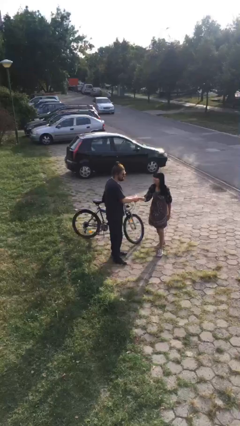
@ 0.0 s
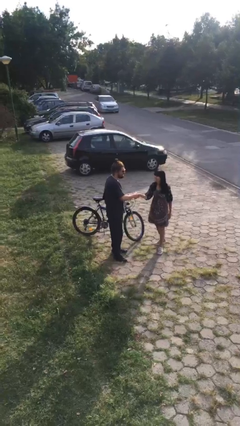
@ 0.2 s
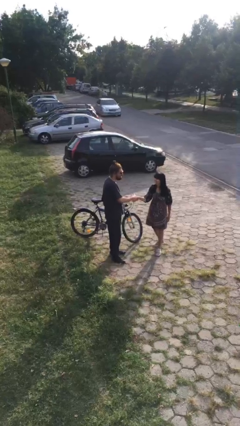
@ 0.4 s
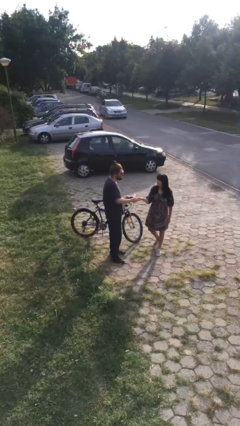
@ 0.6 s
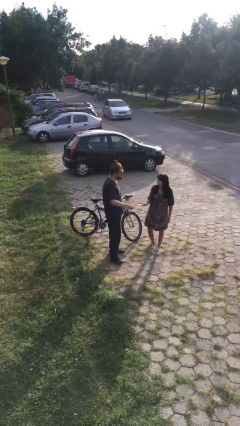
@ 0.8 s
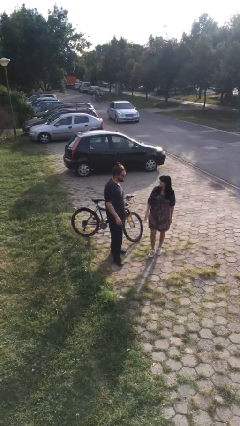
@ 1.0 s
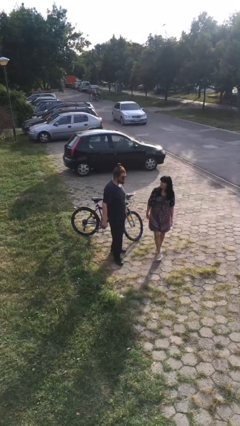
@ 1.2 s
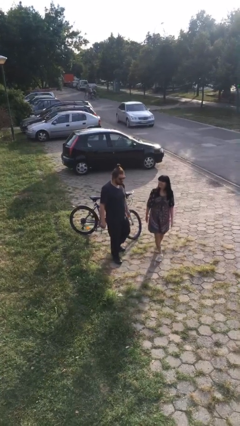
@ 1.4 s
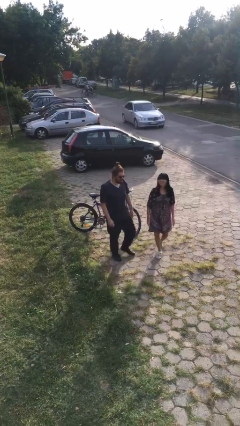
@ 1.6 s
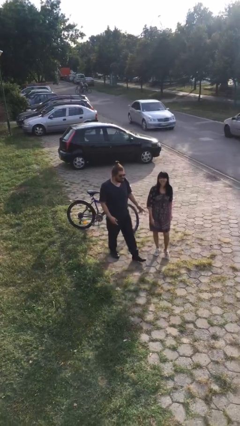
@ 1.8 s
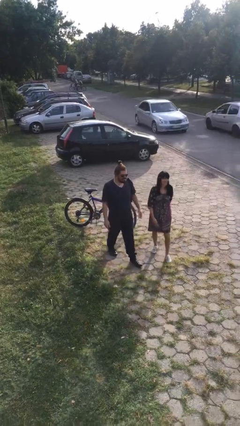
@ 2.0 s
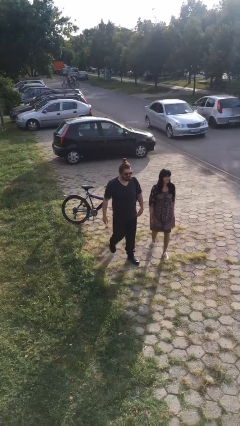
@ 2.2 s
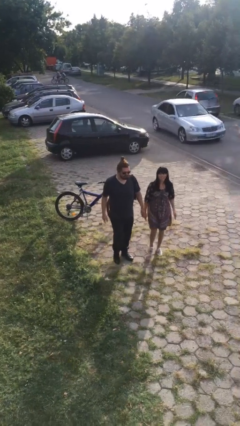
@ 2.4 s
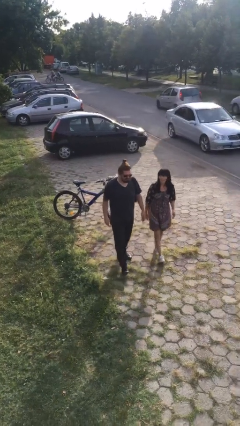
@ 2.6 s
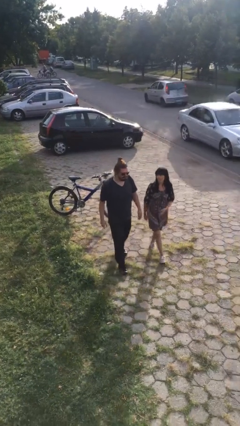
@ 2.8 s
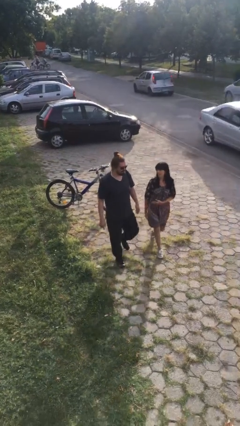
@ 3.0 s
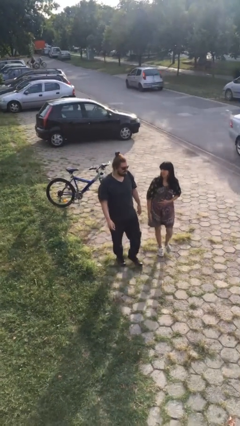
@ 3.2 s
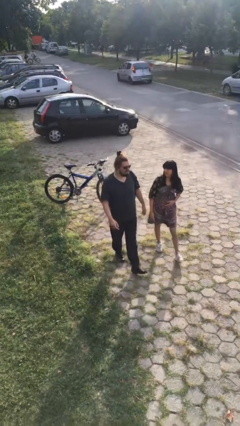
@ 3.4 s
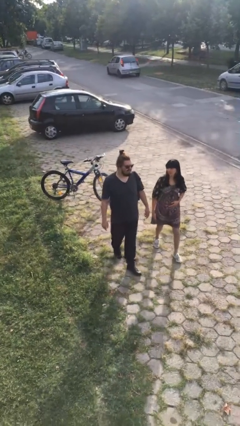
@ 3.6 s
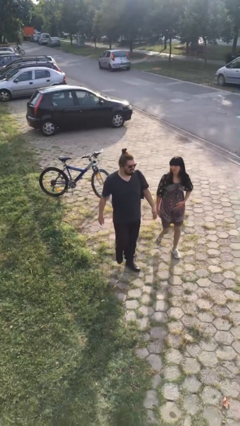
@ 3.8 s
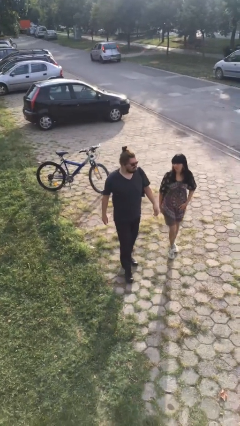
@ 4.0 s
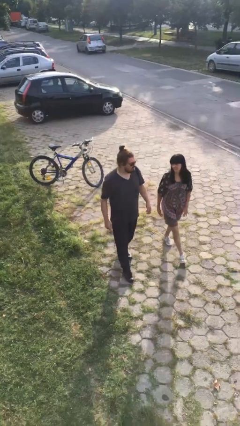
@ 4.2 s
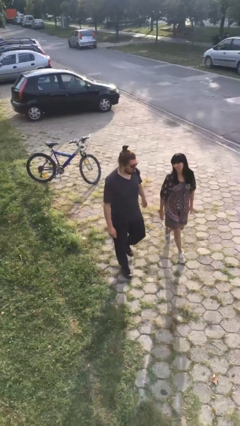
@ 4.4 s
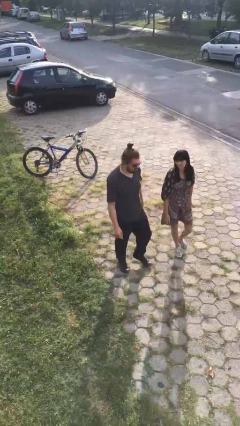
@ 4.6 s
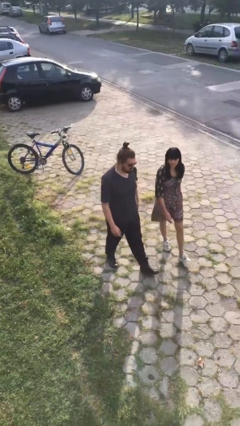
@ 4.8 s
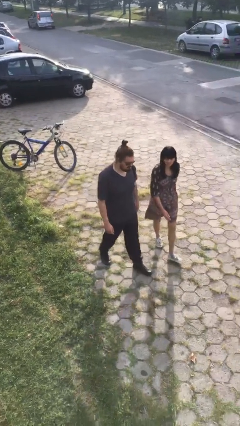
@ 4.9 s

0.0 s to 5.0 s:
person talks to person

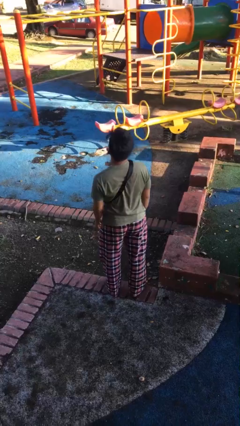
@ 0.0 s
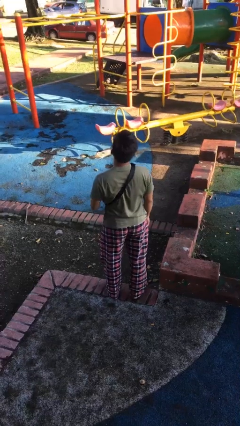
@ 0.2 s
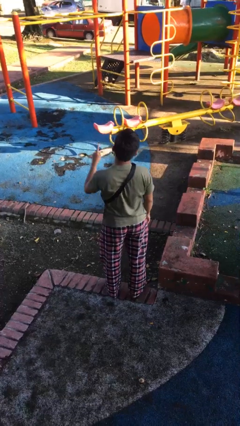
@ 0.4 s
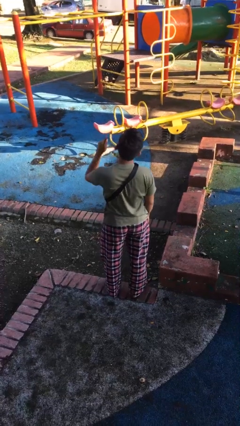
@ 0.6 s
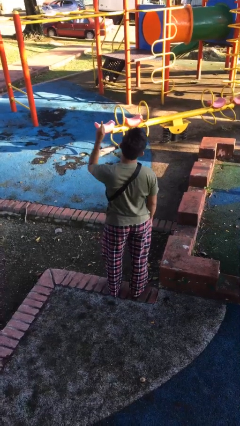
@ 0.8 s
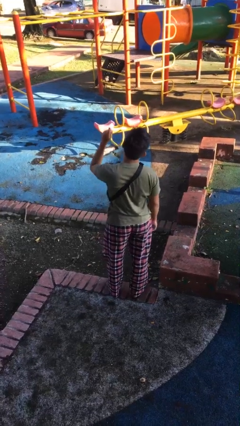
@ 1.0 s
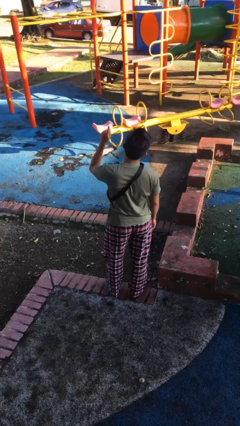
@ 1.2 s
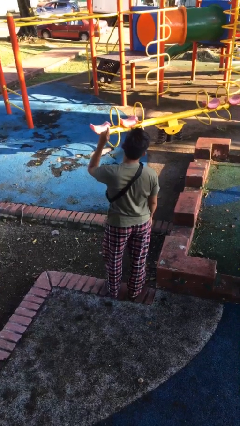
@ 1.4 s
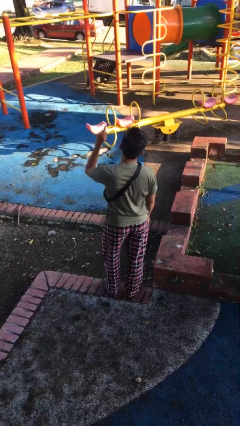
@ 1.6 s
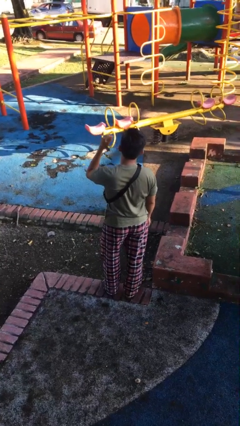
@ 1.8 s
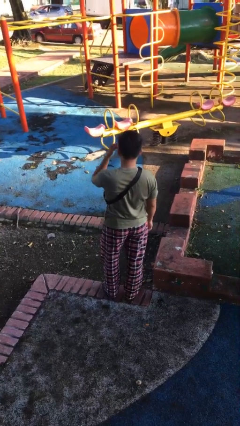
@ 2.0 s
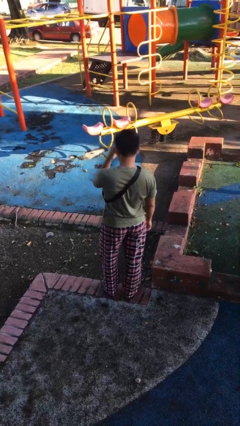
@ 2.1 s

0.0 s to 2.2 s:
person gestures number one

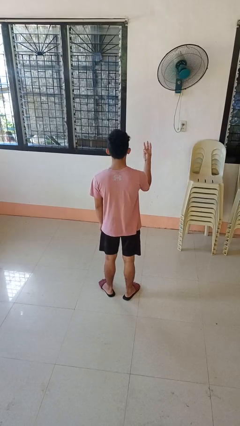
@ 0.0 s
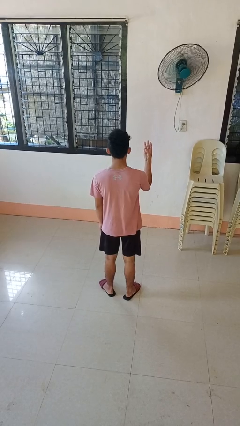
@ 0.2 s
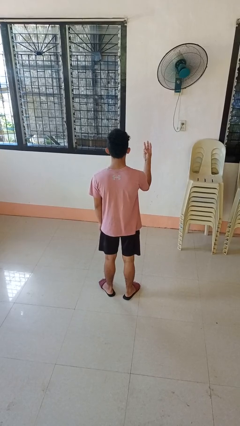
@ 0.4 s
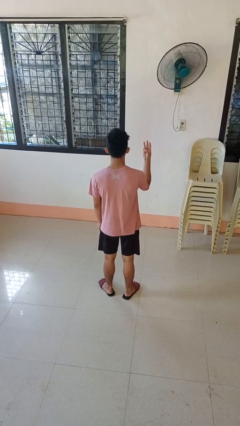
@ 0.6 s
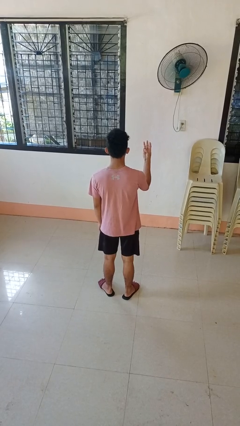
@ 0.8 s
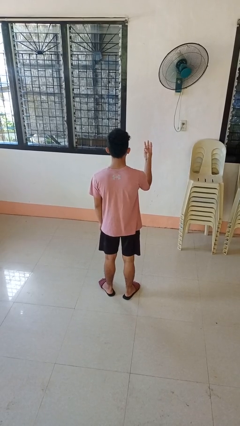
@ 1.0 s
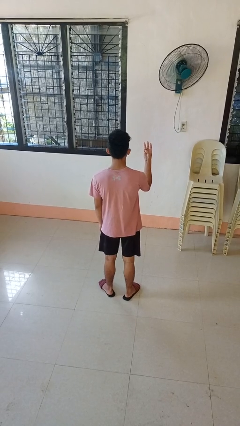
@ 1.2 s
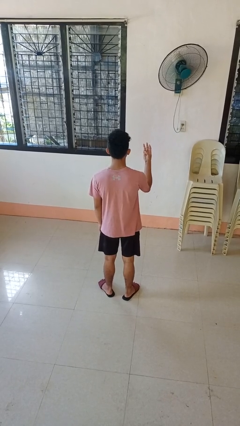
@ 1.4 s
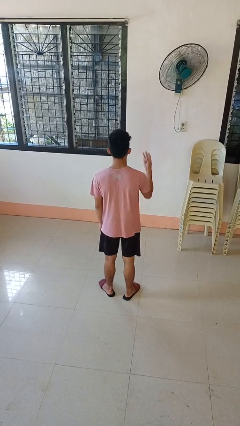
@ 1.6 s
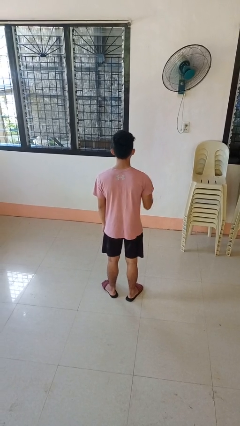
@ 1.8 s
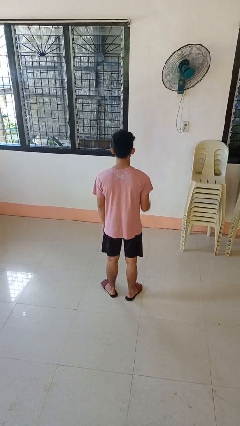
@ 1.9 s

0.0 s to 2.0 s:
person gestures number three

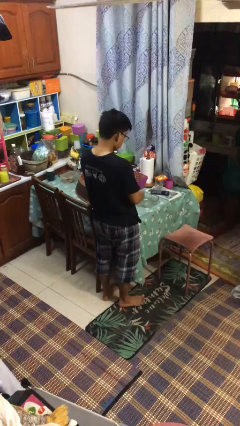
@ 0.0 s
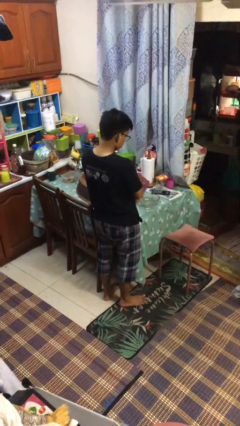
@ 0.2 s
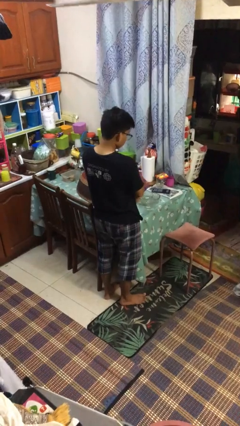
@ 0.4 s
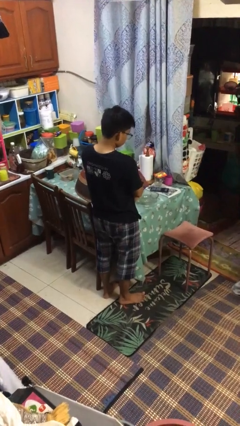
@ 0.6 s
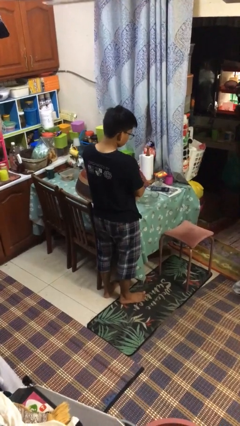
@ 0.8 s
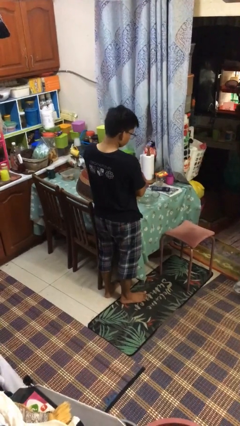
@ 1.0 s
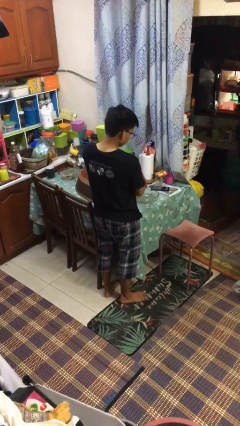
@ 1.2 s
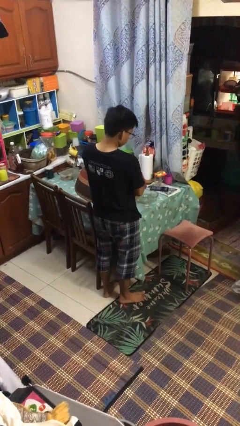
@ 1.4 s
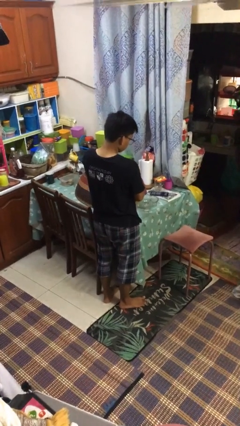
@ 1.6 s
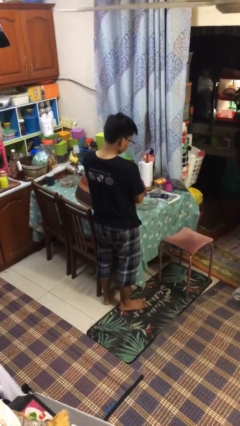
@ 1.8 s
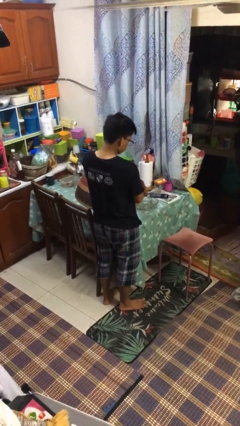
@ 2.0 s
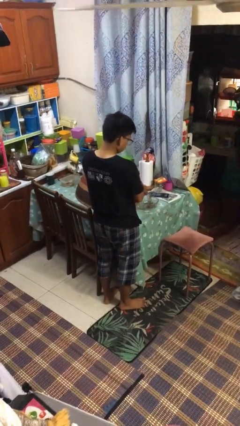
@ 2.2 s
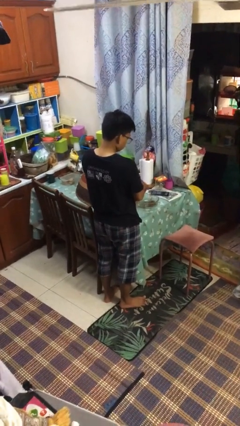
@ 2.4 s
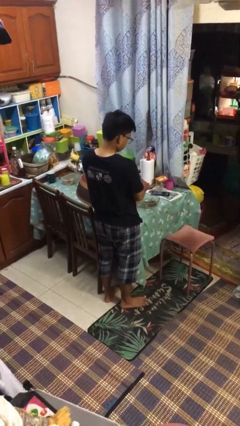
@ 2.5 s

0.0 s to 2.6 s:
person pours into bowl

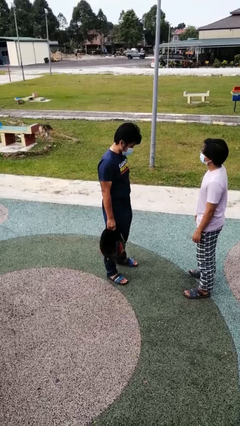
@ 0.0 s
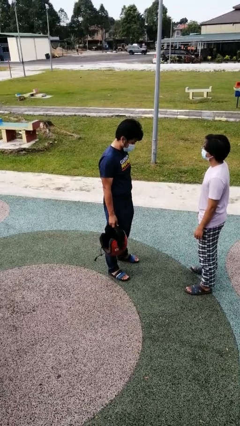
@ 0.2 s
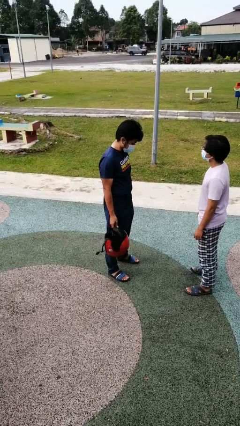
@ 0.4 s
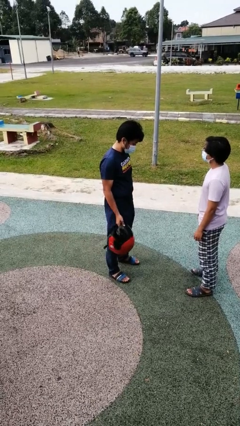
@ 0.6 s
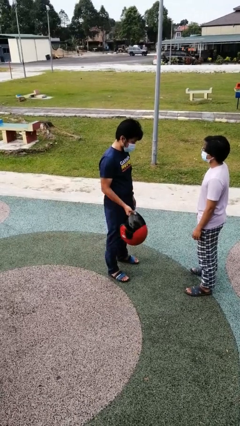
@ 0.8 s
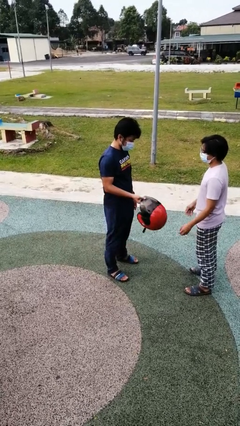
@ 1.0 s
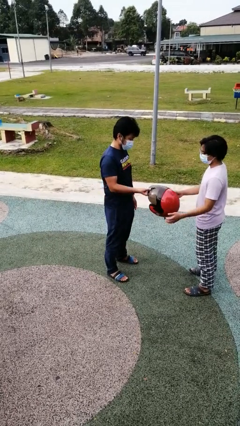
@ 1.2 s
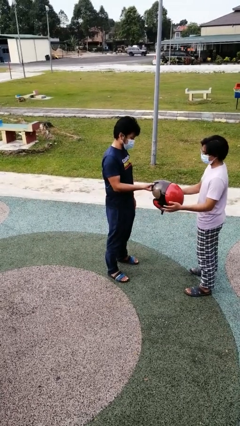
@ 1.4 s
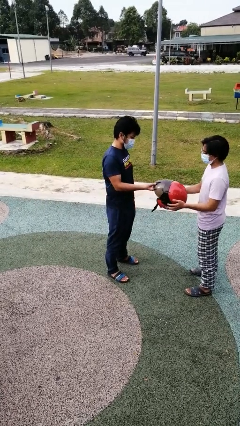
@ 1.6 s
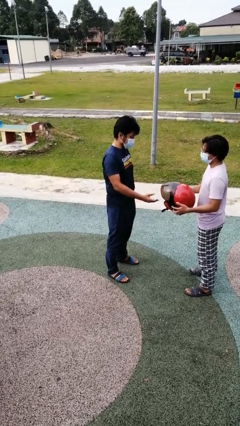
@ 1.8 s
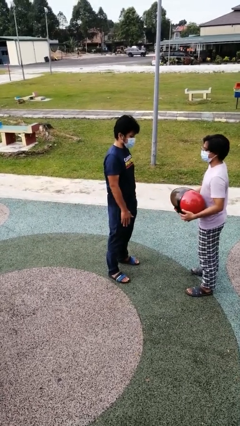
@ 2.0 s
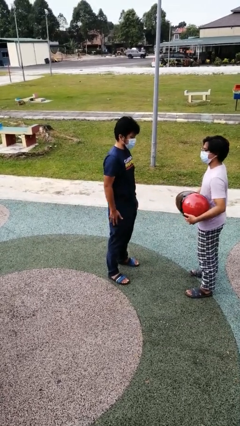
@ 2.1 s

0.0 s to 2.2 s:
person transfers object to person

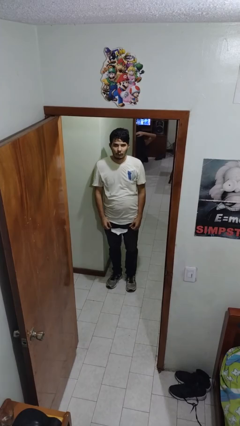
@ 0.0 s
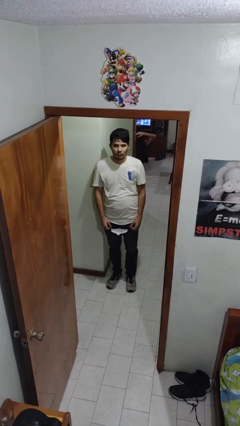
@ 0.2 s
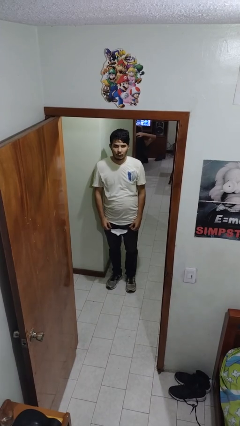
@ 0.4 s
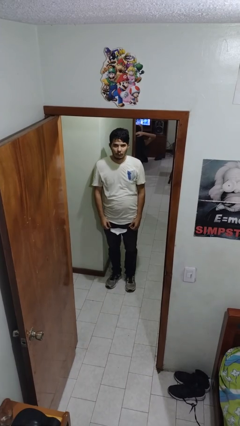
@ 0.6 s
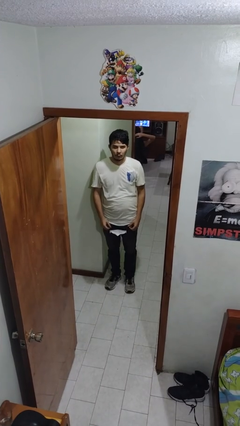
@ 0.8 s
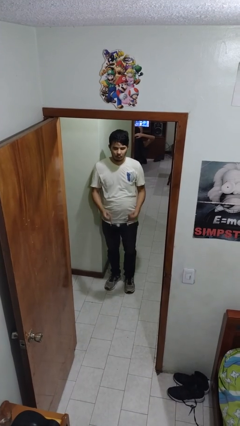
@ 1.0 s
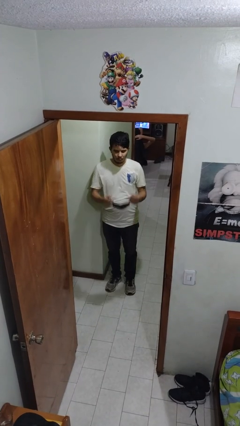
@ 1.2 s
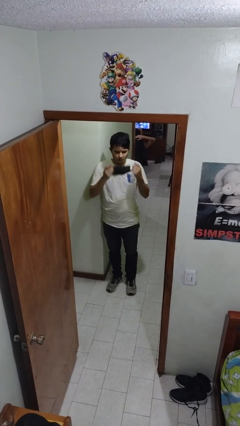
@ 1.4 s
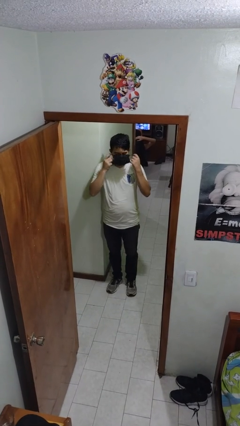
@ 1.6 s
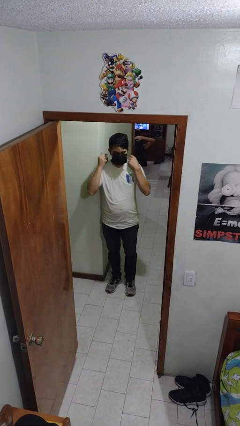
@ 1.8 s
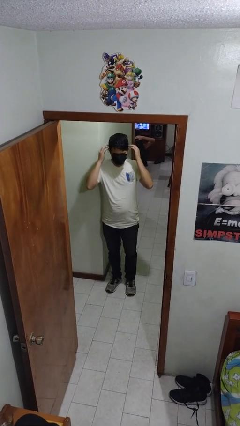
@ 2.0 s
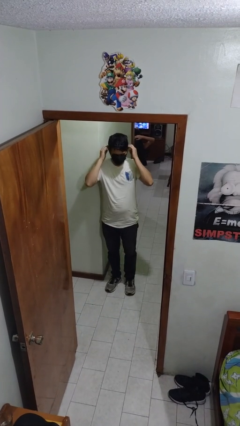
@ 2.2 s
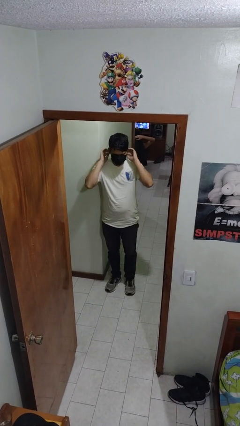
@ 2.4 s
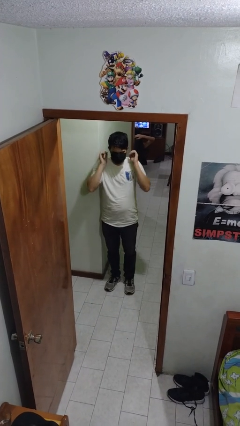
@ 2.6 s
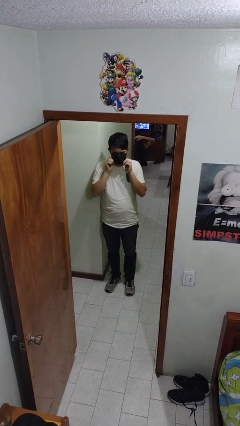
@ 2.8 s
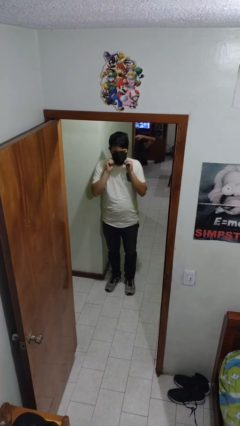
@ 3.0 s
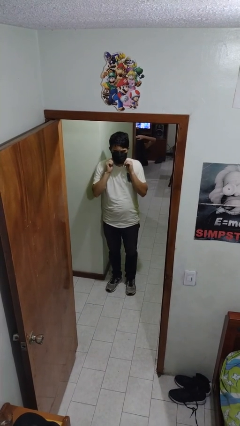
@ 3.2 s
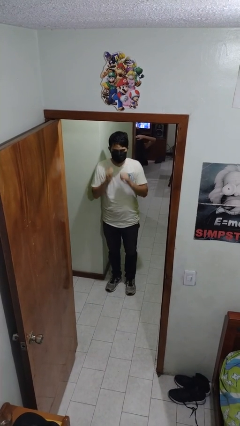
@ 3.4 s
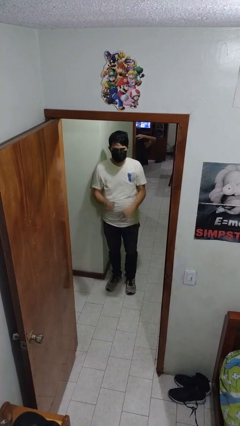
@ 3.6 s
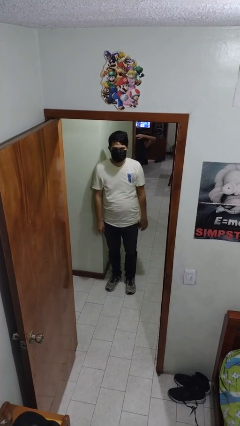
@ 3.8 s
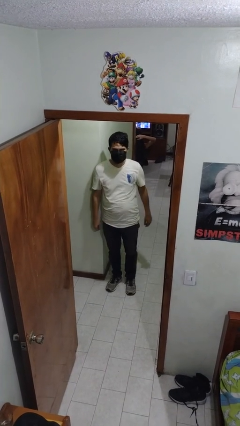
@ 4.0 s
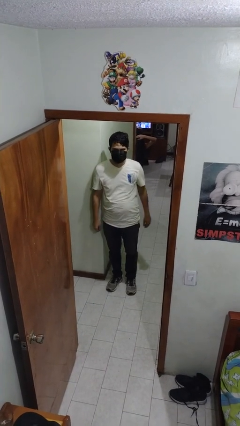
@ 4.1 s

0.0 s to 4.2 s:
person puts on facemask
